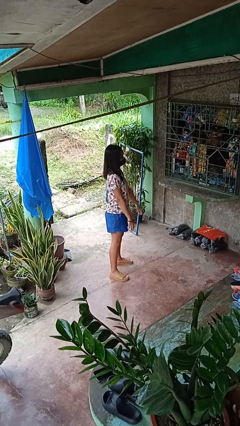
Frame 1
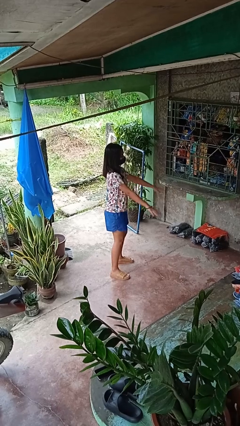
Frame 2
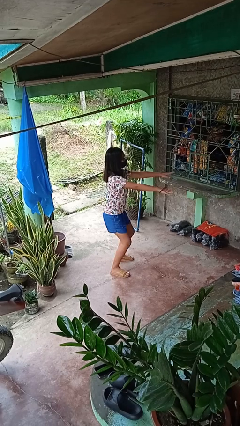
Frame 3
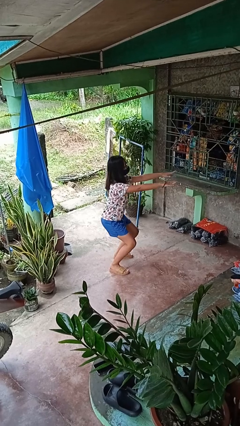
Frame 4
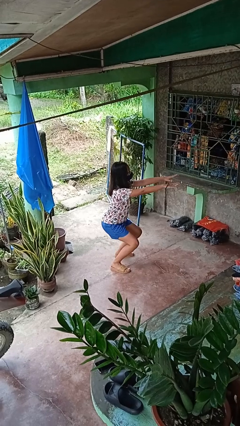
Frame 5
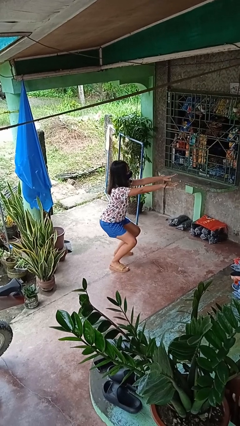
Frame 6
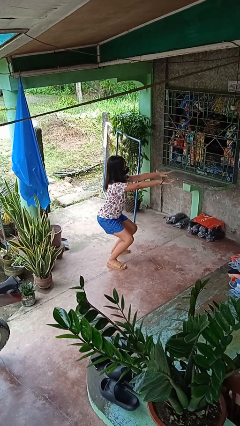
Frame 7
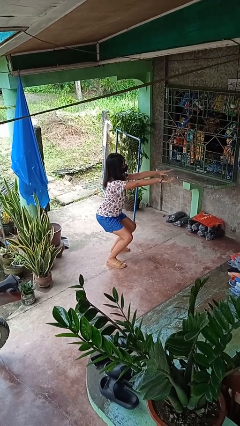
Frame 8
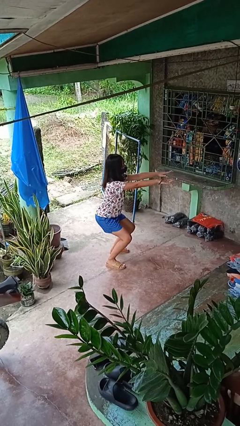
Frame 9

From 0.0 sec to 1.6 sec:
person squats

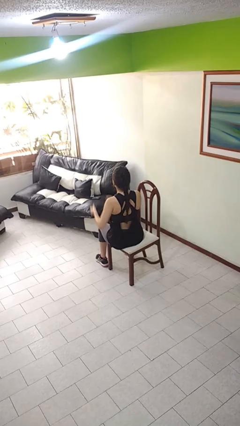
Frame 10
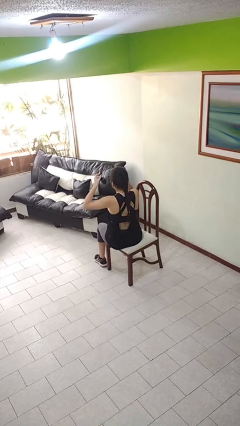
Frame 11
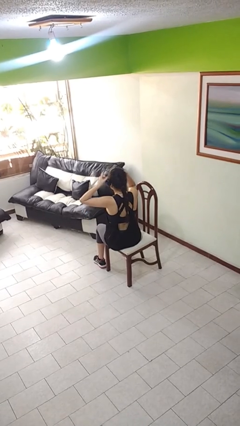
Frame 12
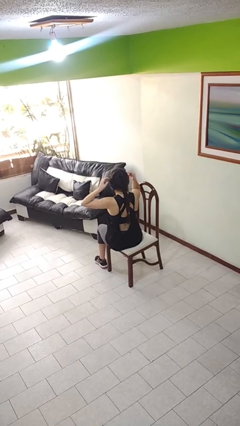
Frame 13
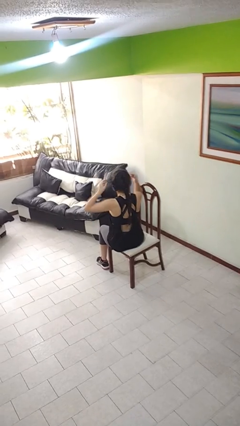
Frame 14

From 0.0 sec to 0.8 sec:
person puts on headphones

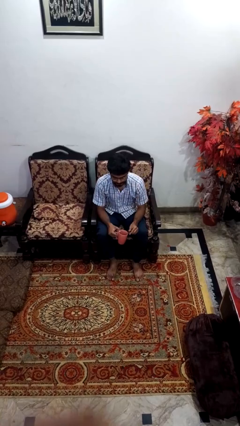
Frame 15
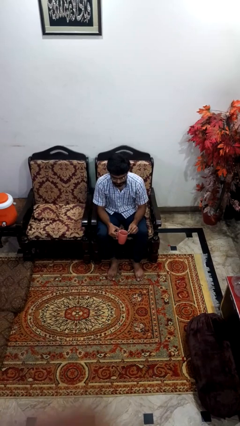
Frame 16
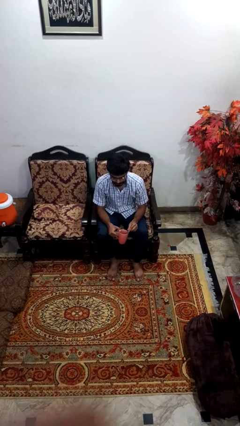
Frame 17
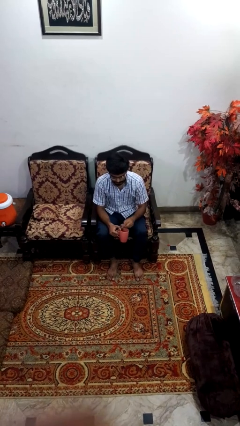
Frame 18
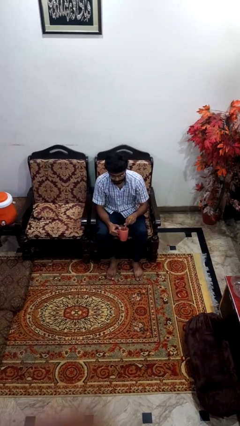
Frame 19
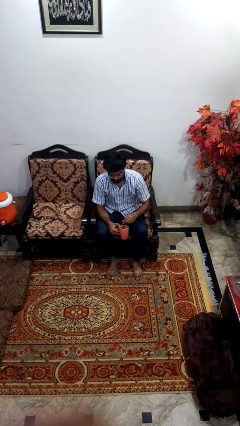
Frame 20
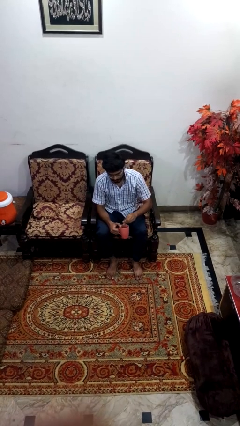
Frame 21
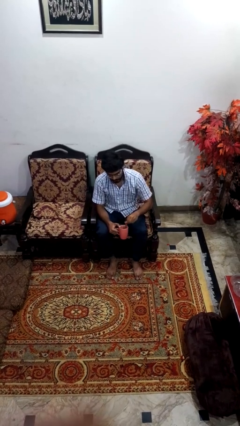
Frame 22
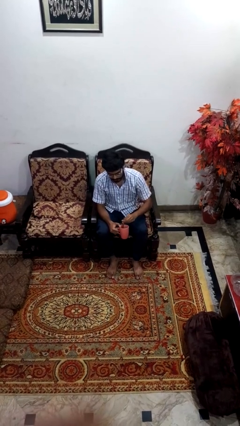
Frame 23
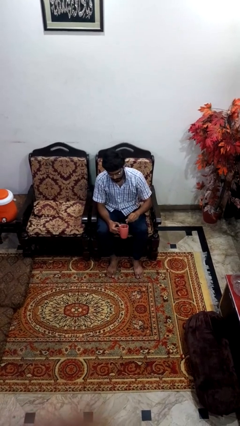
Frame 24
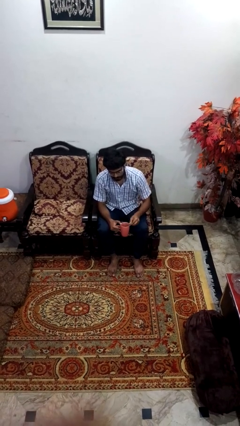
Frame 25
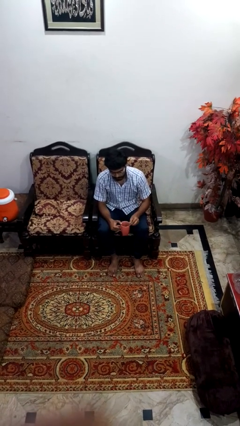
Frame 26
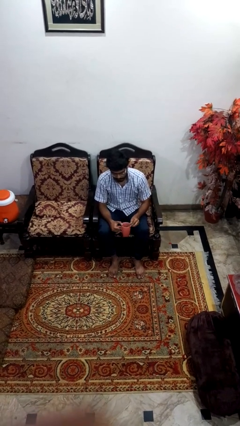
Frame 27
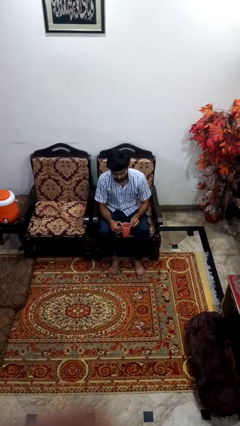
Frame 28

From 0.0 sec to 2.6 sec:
person stirs mug

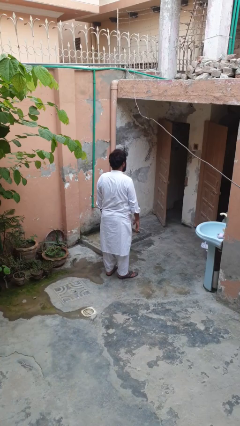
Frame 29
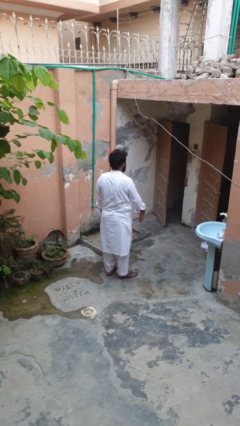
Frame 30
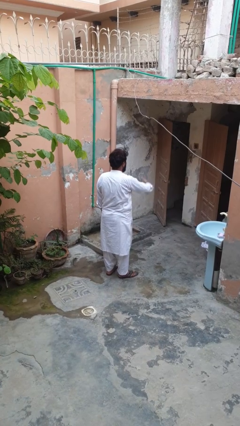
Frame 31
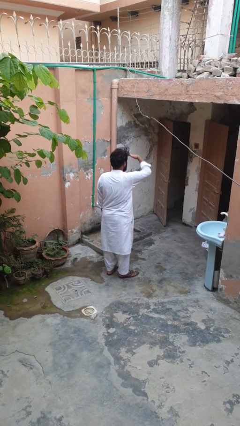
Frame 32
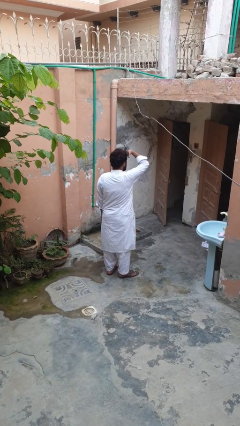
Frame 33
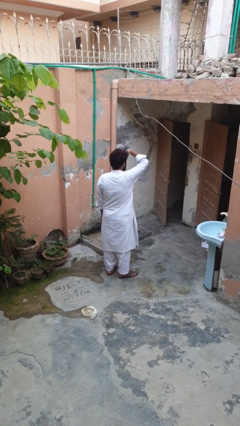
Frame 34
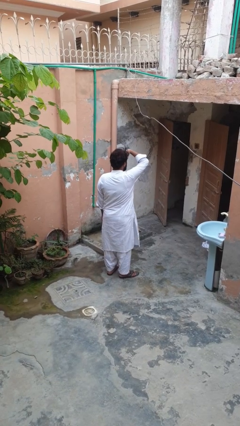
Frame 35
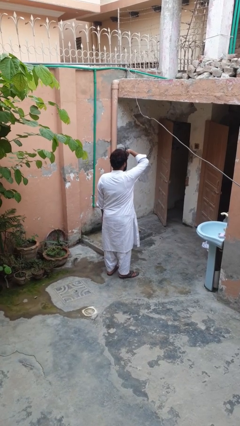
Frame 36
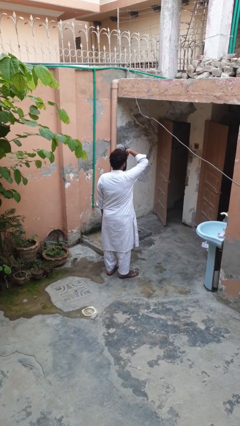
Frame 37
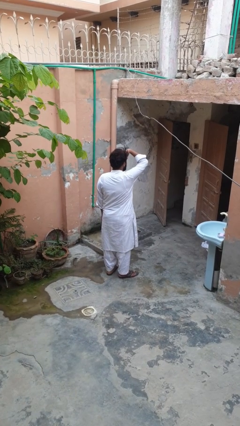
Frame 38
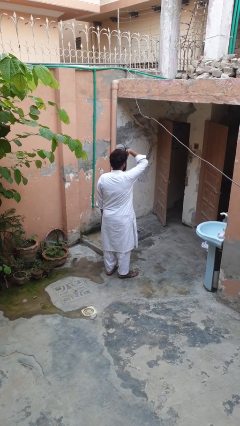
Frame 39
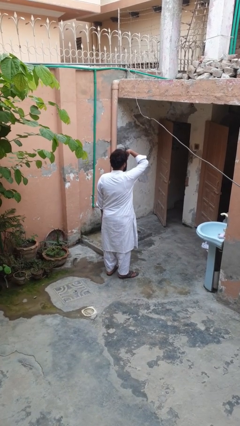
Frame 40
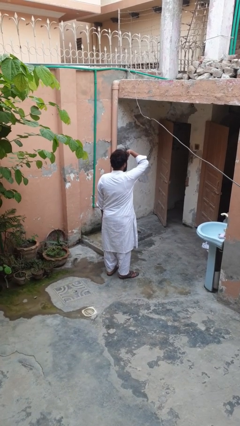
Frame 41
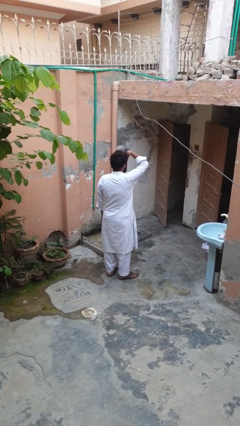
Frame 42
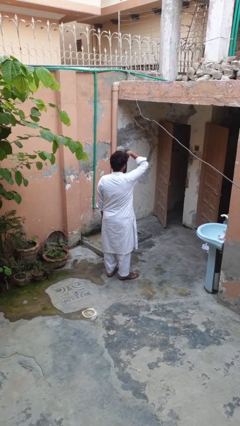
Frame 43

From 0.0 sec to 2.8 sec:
person shades eyes

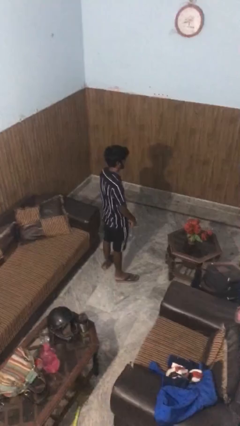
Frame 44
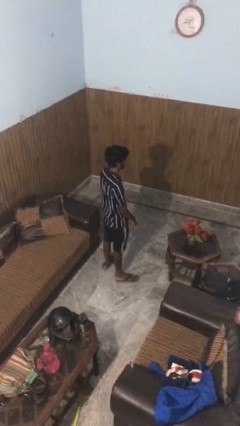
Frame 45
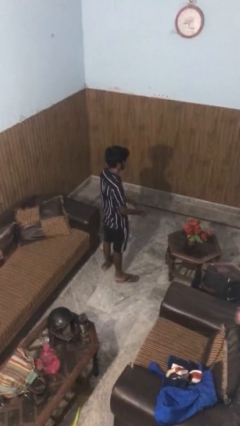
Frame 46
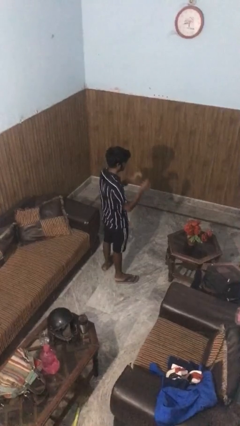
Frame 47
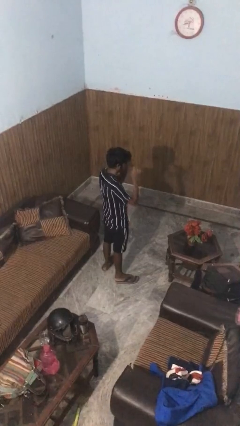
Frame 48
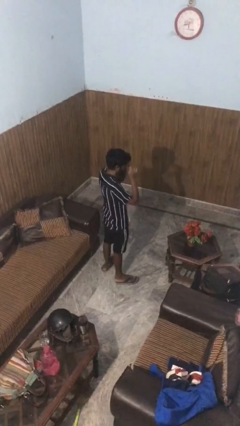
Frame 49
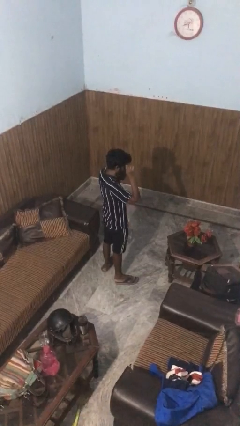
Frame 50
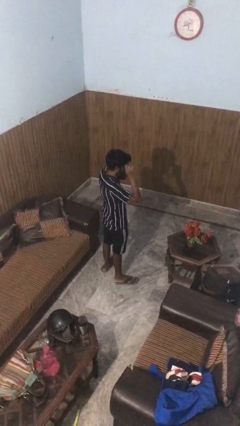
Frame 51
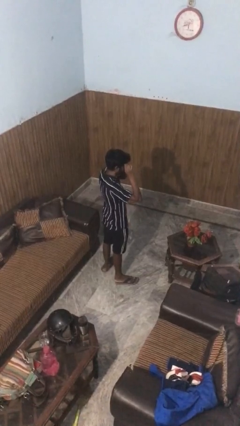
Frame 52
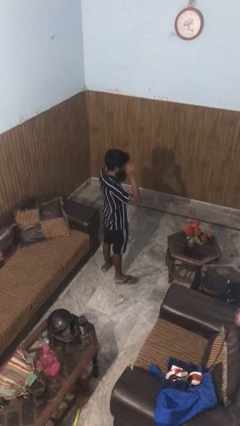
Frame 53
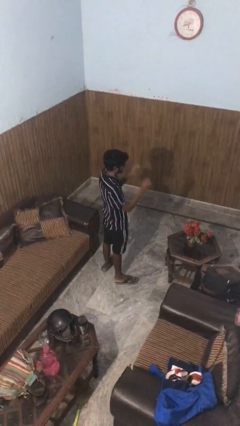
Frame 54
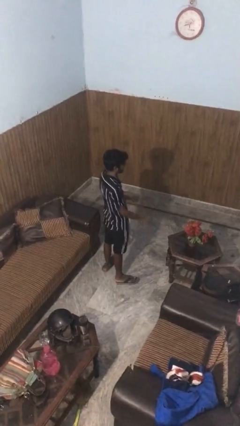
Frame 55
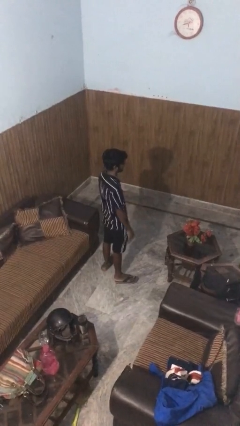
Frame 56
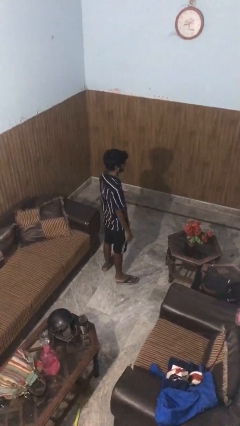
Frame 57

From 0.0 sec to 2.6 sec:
person puts on glasses

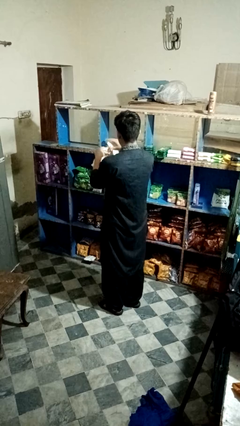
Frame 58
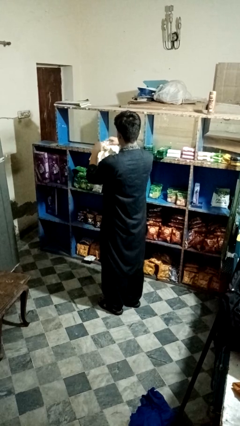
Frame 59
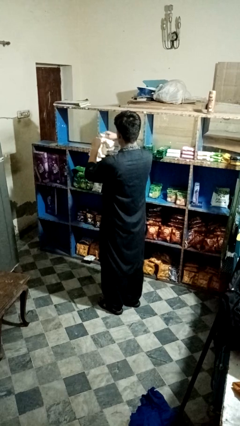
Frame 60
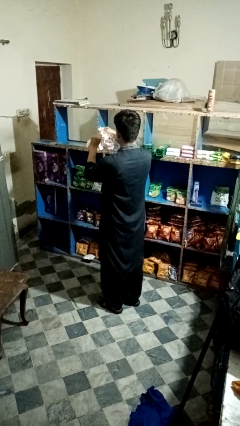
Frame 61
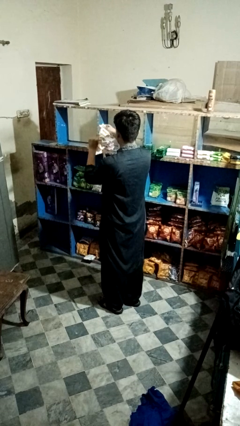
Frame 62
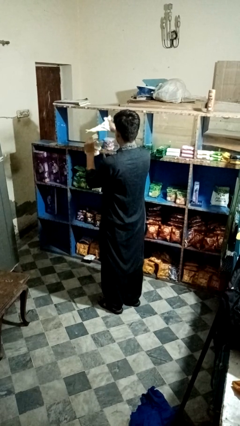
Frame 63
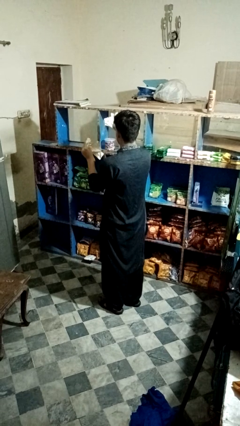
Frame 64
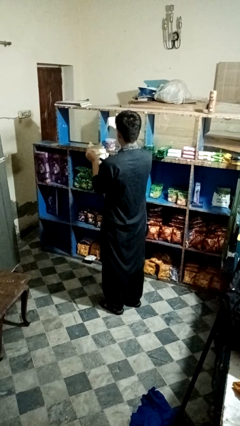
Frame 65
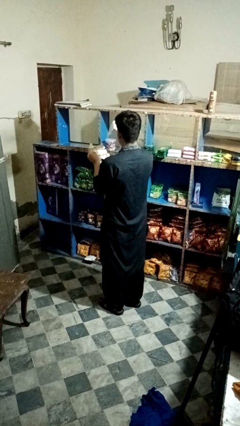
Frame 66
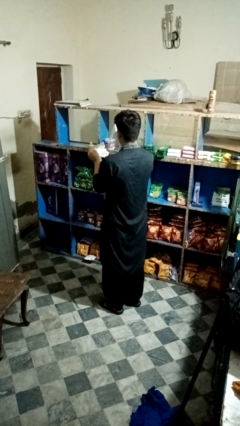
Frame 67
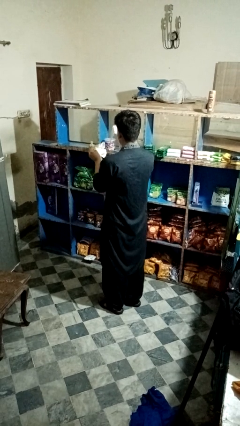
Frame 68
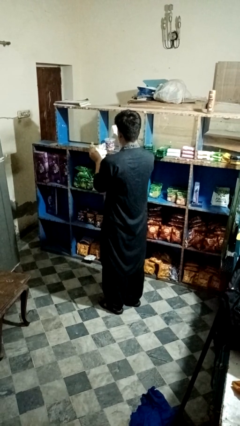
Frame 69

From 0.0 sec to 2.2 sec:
person tears paper

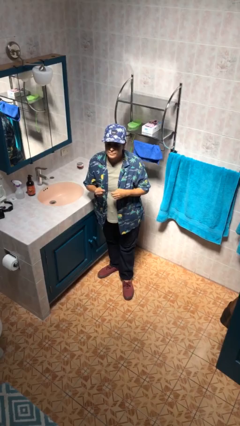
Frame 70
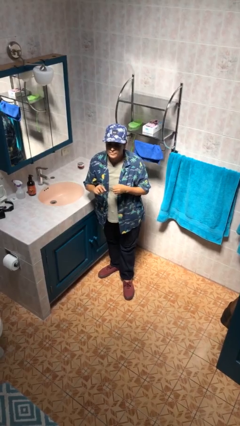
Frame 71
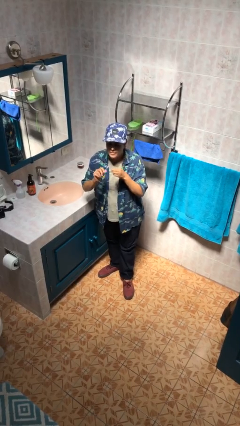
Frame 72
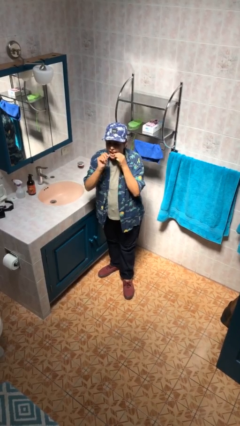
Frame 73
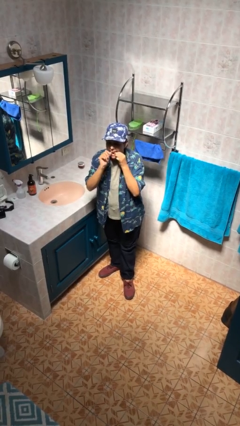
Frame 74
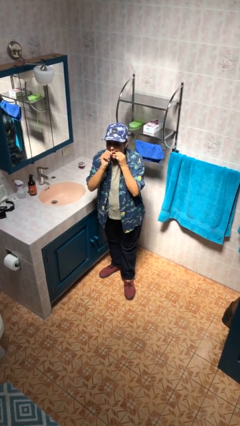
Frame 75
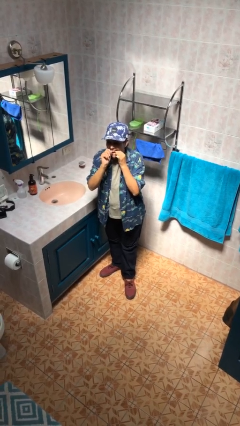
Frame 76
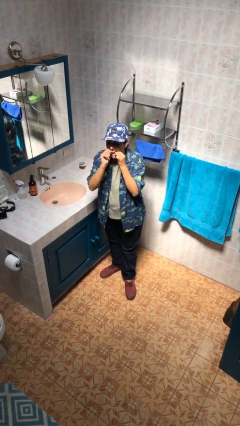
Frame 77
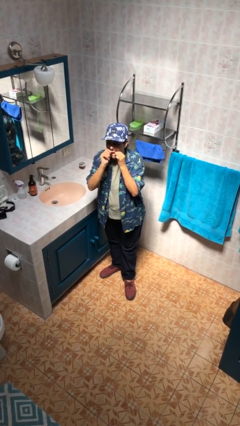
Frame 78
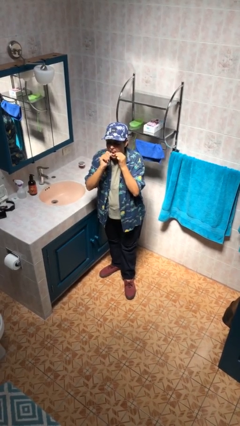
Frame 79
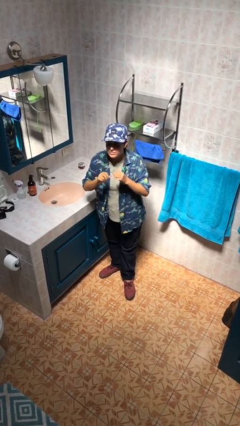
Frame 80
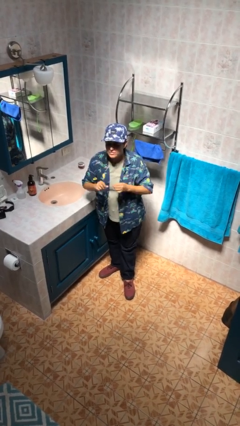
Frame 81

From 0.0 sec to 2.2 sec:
person flosses

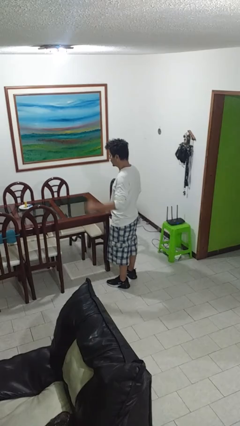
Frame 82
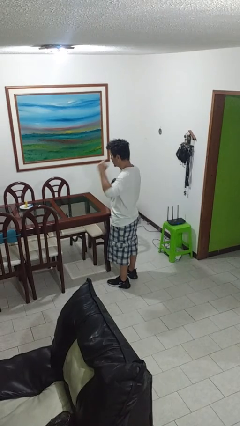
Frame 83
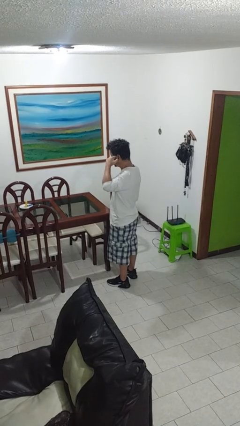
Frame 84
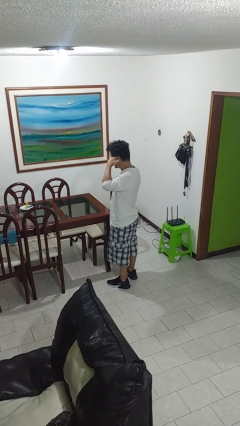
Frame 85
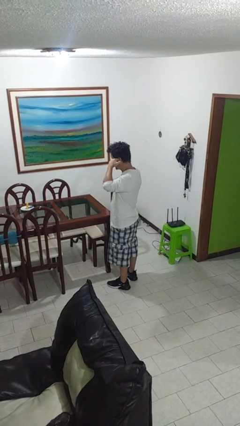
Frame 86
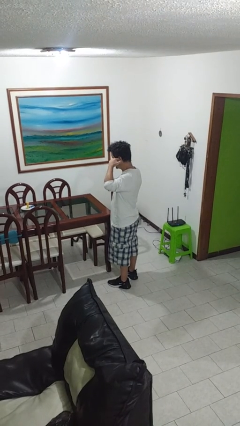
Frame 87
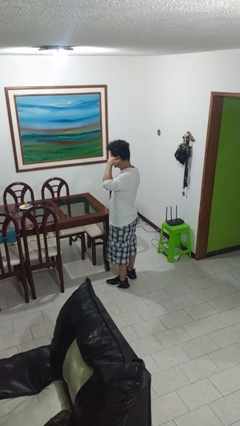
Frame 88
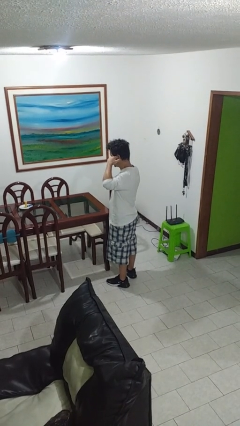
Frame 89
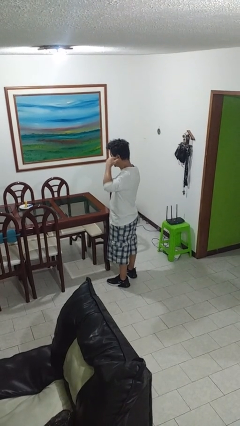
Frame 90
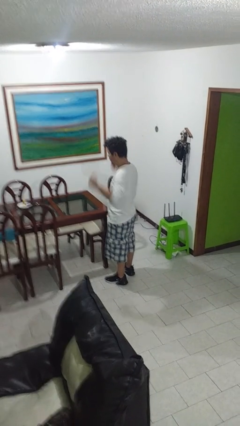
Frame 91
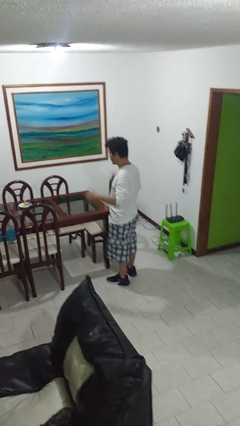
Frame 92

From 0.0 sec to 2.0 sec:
person puts fingers in ear

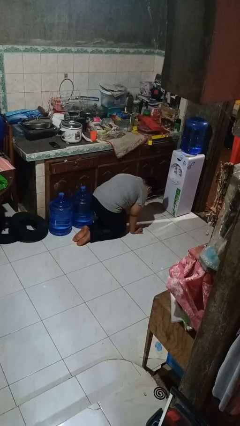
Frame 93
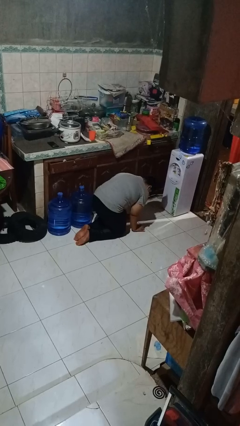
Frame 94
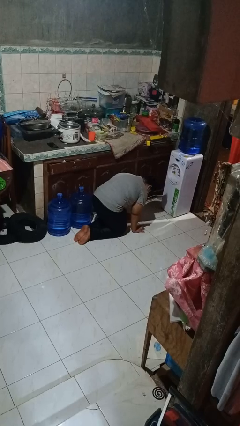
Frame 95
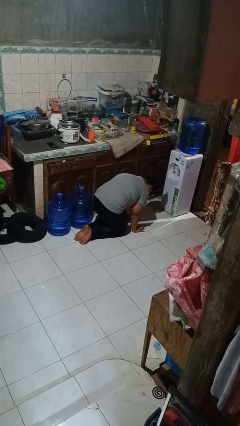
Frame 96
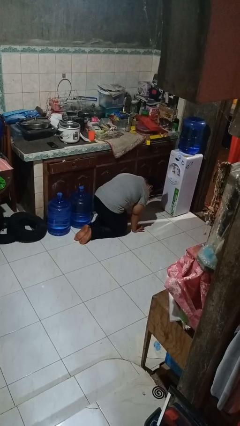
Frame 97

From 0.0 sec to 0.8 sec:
person crawls
